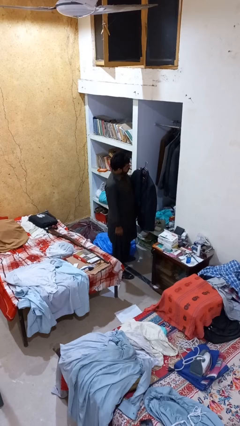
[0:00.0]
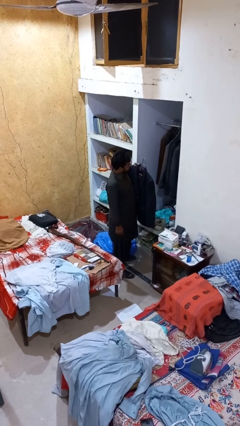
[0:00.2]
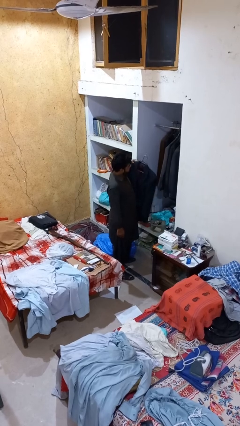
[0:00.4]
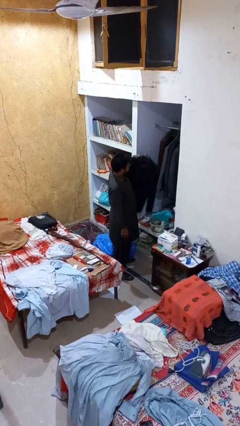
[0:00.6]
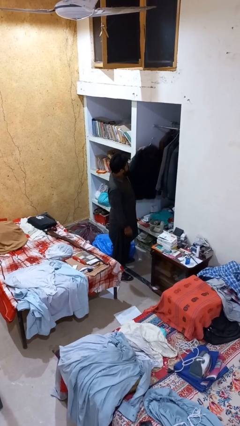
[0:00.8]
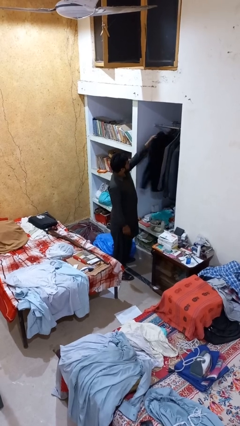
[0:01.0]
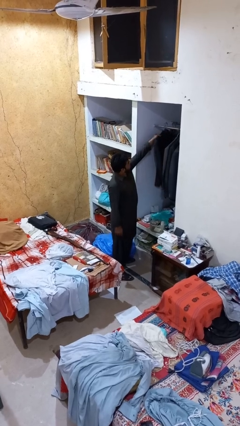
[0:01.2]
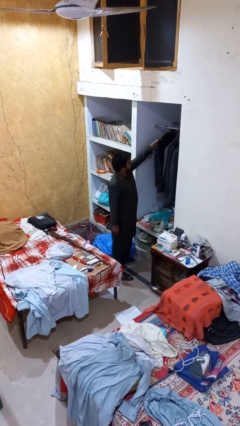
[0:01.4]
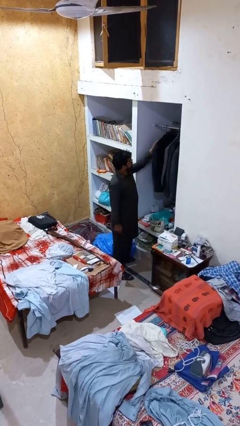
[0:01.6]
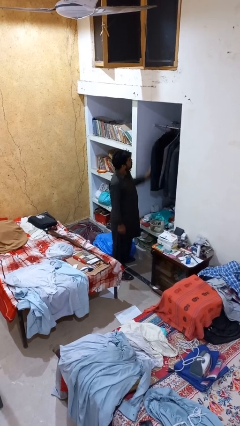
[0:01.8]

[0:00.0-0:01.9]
person puts clothes into closet

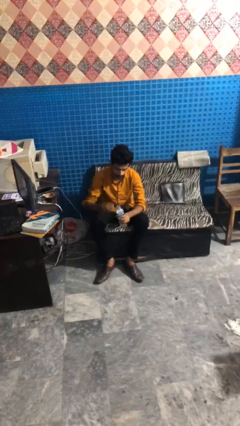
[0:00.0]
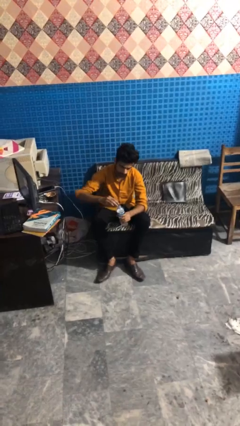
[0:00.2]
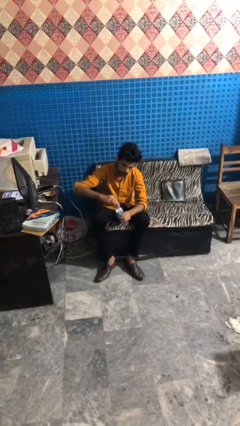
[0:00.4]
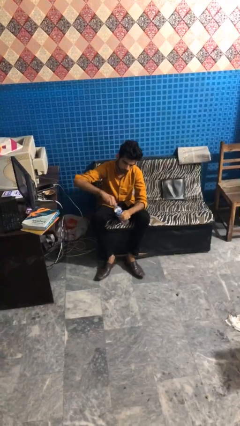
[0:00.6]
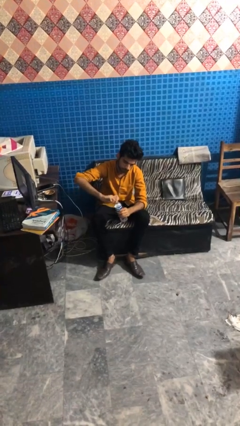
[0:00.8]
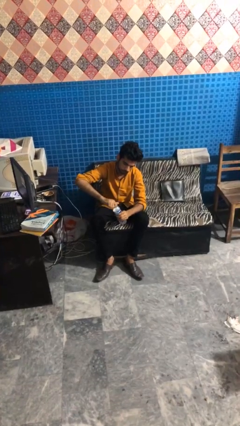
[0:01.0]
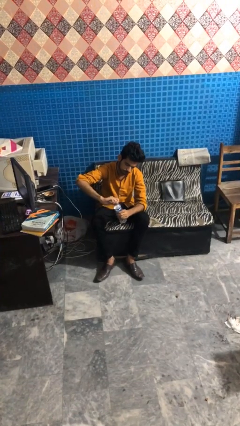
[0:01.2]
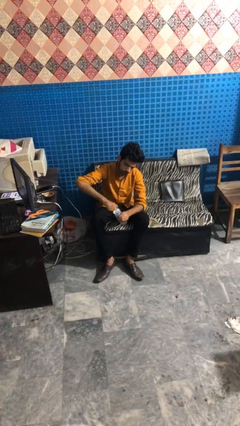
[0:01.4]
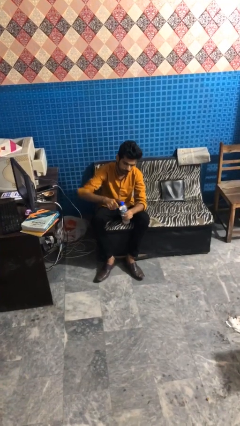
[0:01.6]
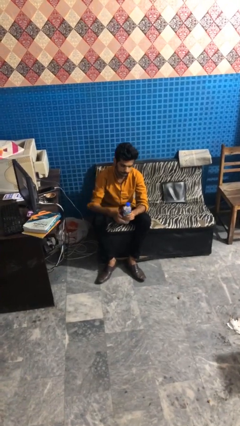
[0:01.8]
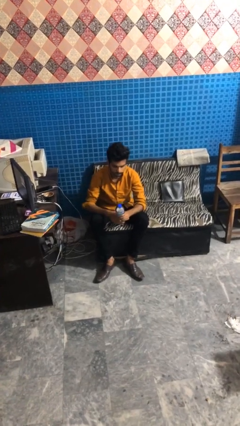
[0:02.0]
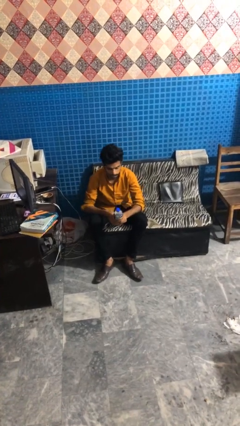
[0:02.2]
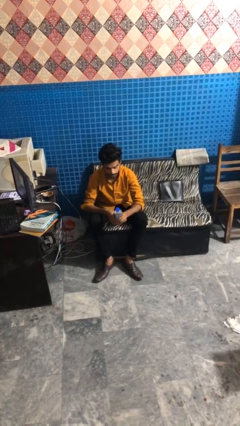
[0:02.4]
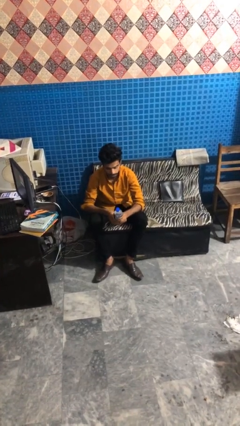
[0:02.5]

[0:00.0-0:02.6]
person screws lid to bottle

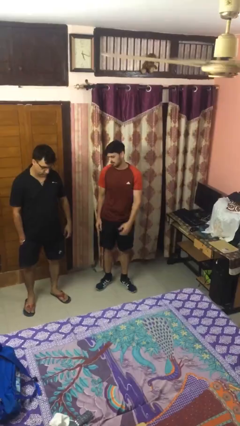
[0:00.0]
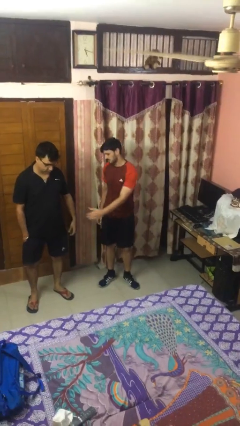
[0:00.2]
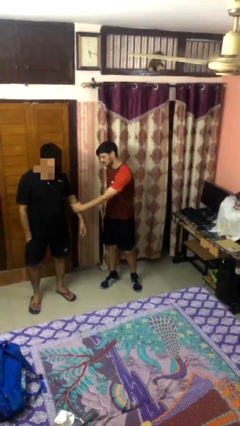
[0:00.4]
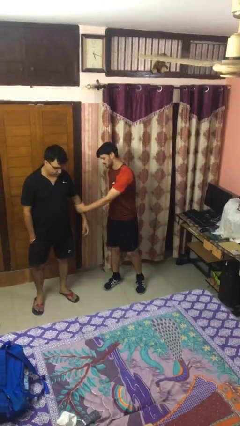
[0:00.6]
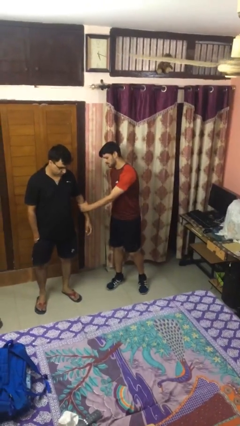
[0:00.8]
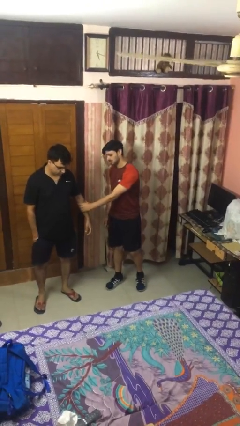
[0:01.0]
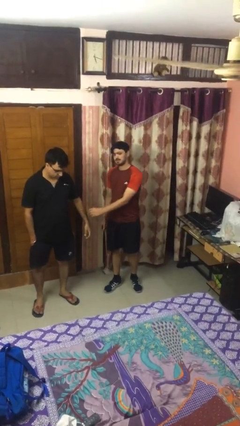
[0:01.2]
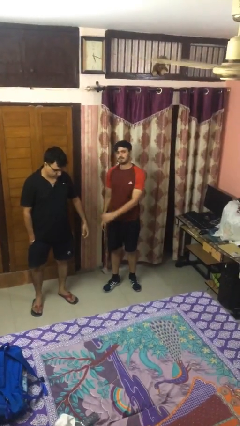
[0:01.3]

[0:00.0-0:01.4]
person grabs person by forearm

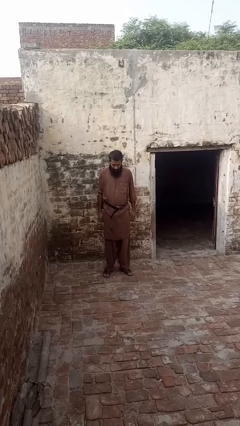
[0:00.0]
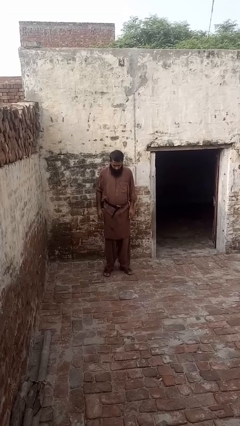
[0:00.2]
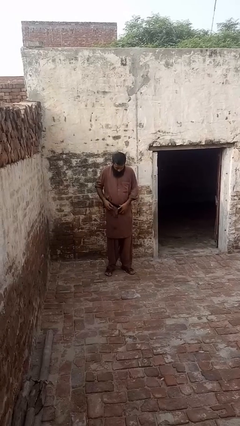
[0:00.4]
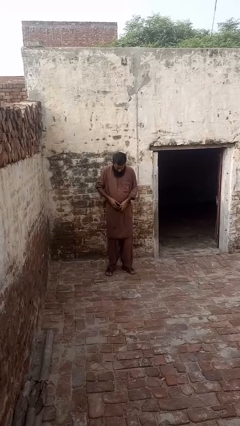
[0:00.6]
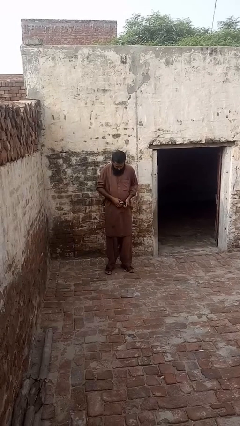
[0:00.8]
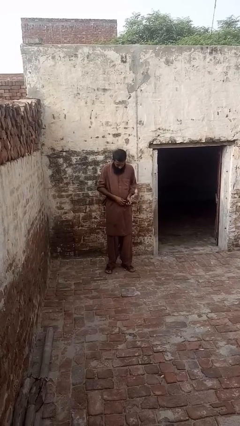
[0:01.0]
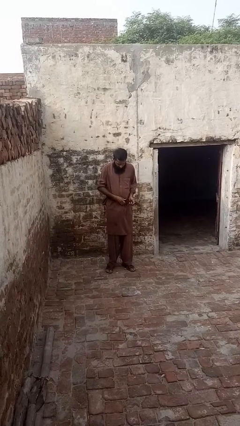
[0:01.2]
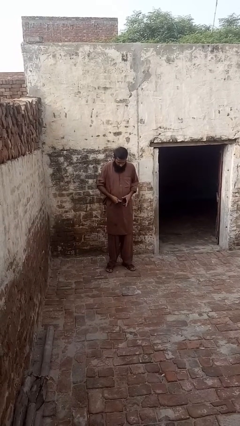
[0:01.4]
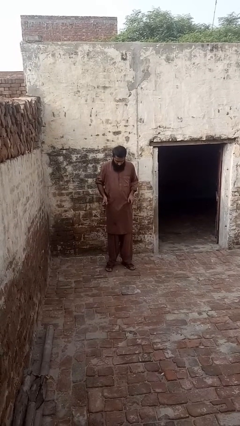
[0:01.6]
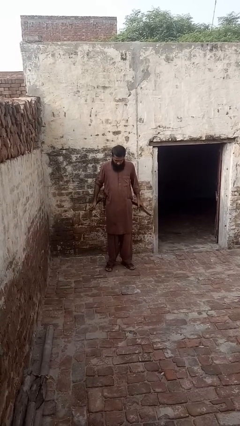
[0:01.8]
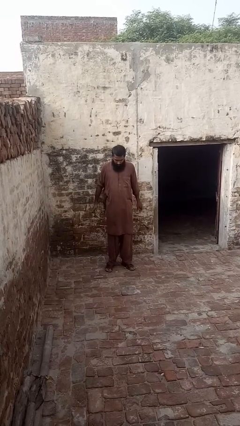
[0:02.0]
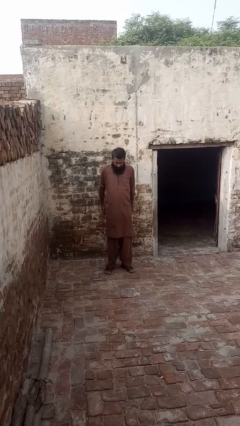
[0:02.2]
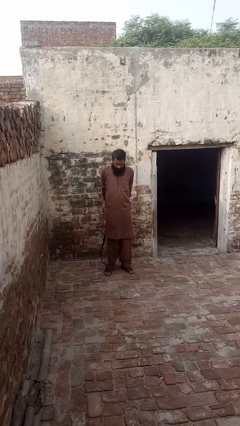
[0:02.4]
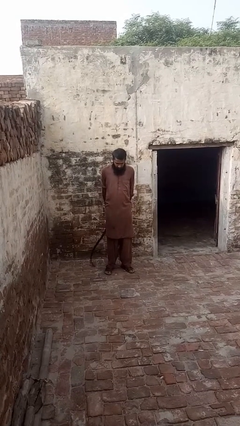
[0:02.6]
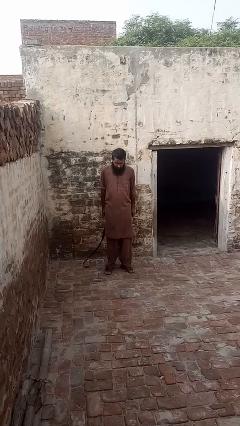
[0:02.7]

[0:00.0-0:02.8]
person takes off belt

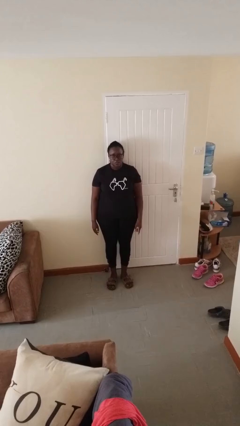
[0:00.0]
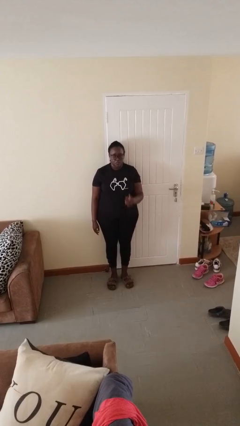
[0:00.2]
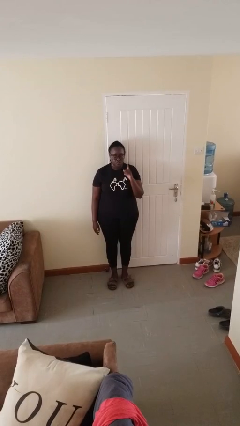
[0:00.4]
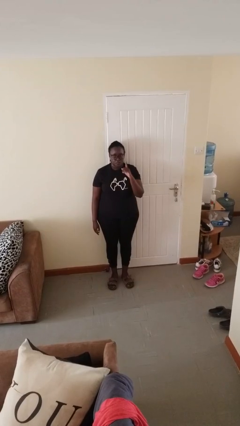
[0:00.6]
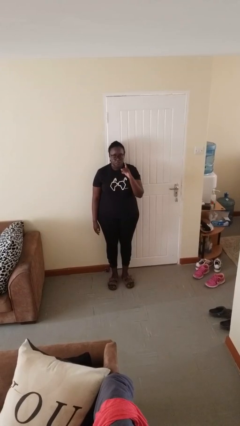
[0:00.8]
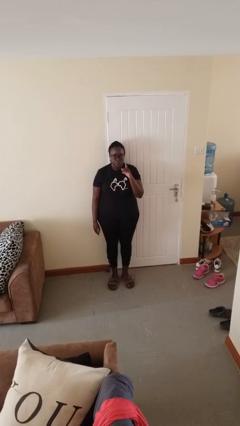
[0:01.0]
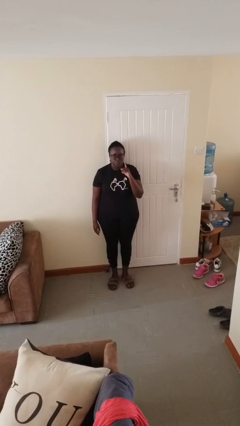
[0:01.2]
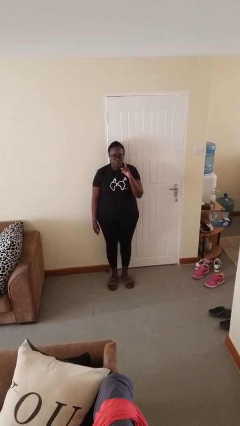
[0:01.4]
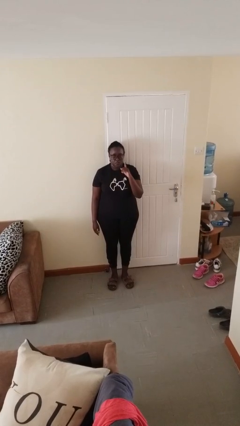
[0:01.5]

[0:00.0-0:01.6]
person gestures number one

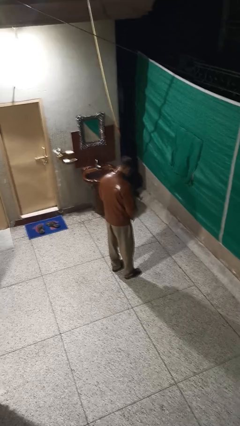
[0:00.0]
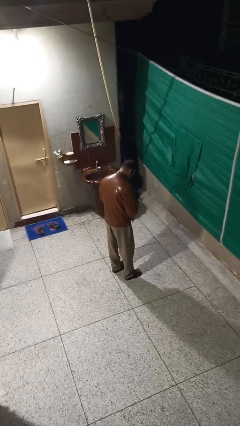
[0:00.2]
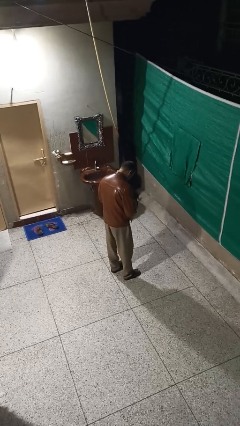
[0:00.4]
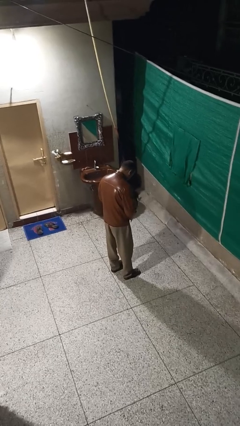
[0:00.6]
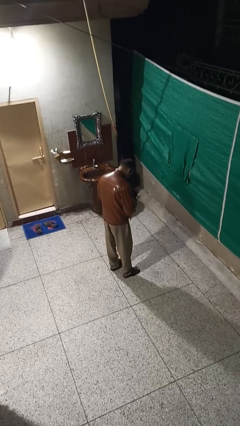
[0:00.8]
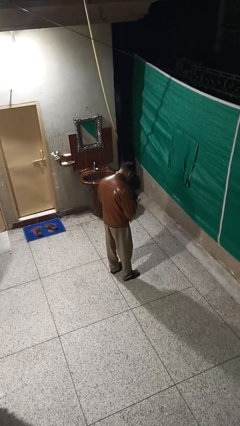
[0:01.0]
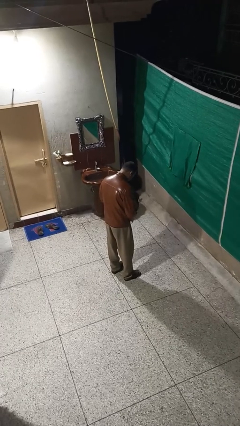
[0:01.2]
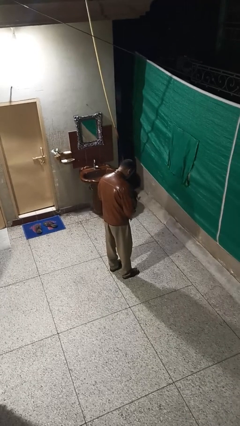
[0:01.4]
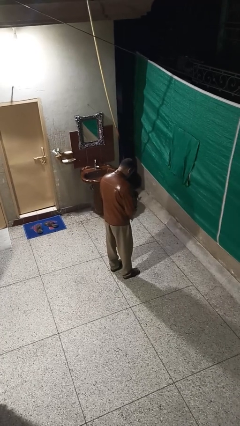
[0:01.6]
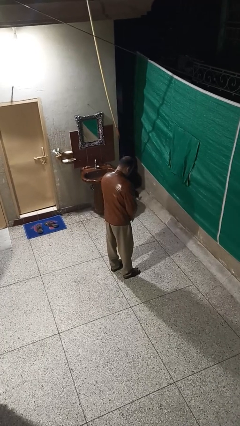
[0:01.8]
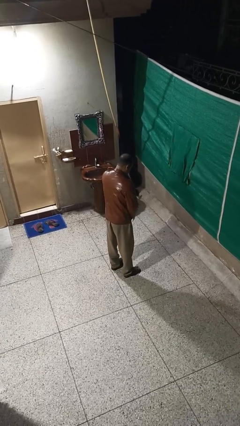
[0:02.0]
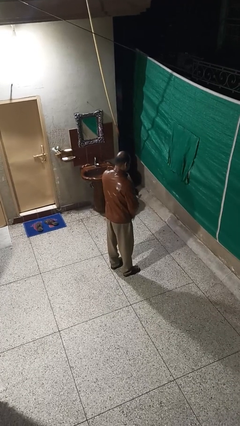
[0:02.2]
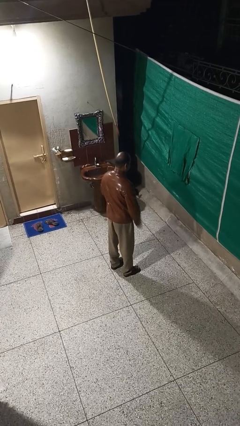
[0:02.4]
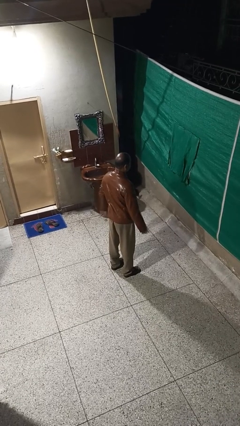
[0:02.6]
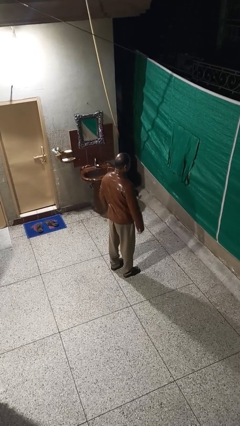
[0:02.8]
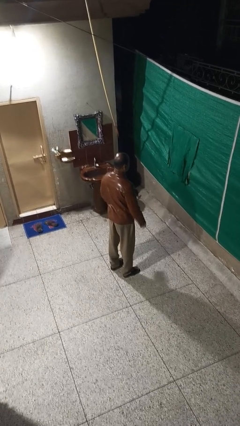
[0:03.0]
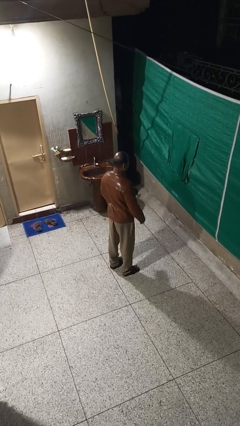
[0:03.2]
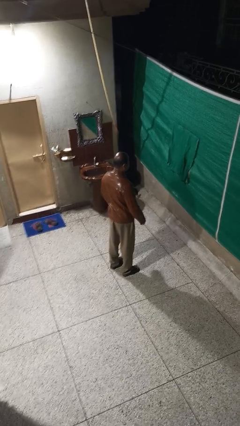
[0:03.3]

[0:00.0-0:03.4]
person zips up jacket

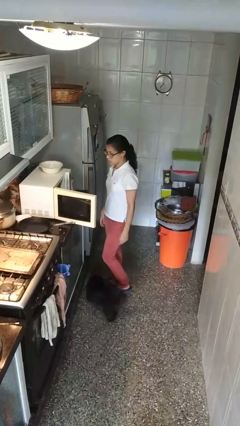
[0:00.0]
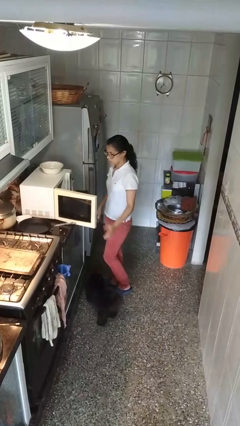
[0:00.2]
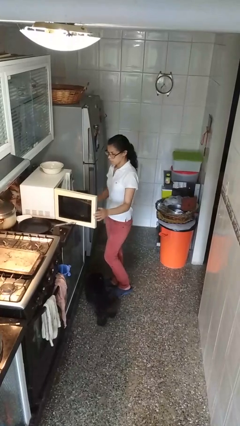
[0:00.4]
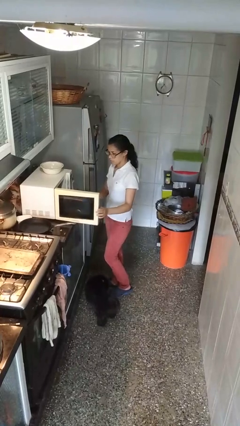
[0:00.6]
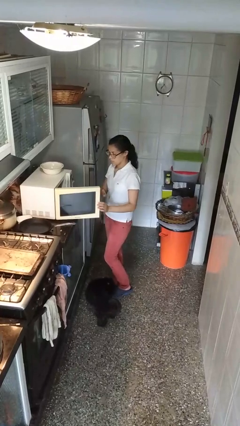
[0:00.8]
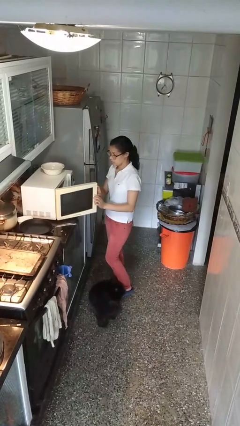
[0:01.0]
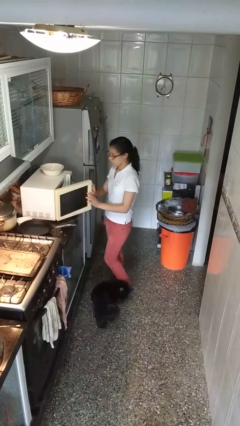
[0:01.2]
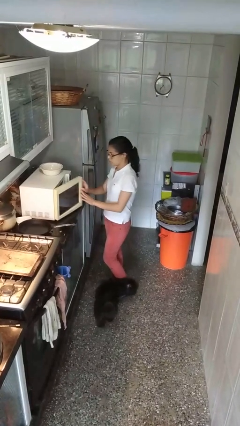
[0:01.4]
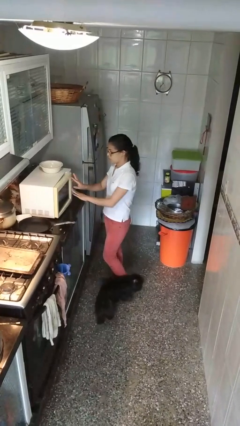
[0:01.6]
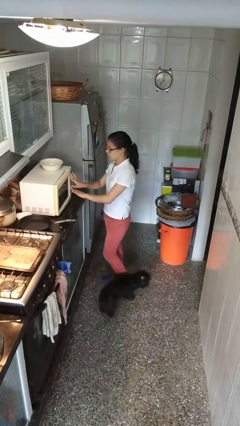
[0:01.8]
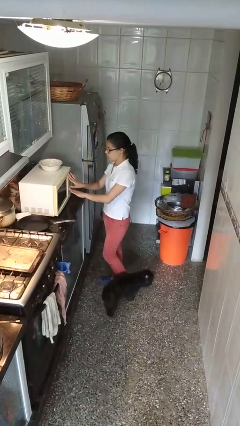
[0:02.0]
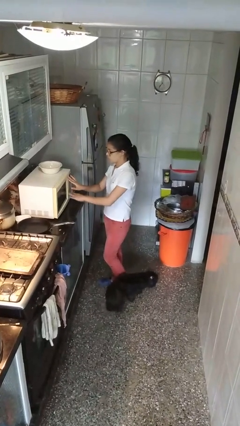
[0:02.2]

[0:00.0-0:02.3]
person closes microwave

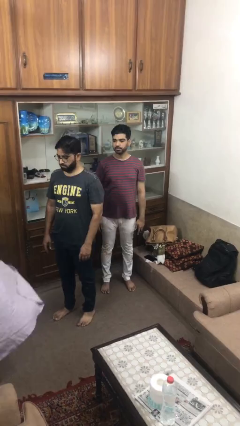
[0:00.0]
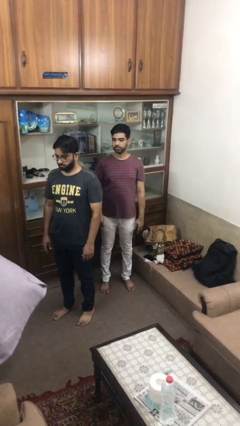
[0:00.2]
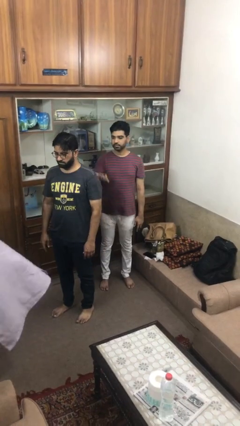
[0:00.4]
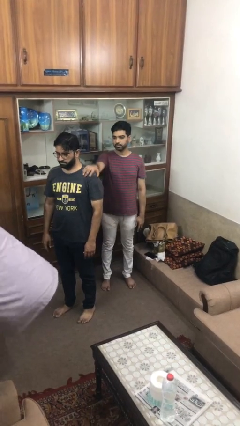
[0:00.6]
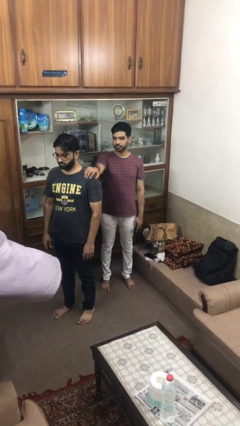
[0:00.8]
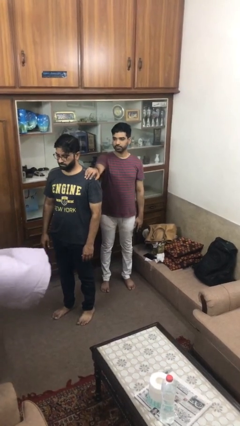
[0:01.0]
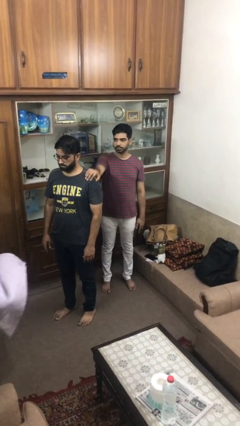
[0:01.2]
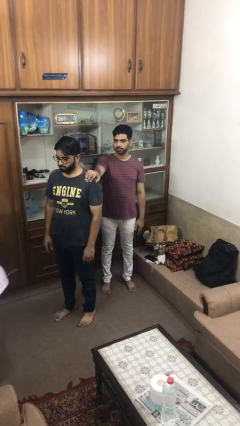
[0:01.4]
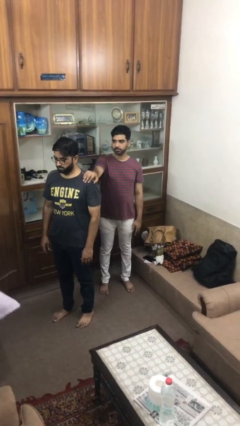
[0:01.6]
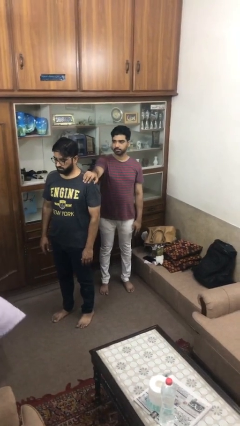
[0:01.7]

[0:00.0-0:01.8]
person grabs person by shoulder
